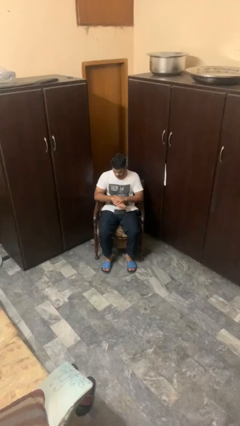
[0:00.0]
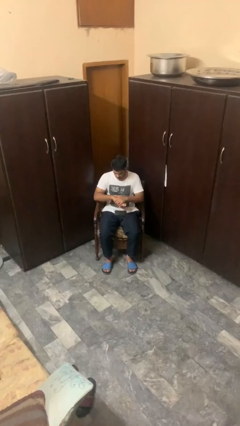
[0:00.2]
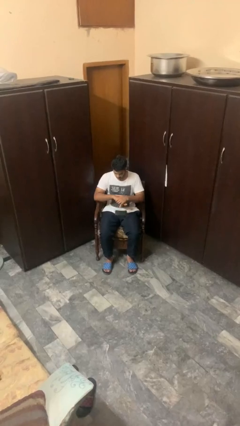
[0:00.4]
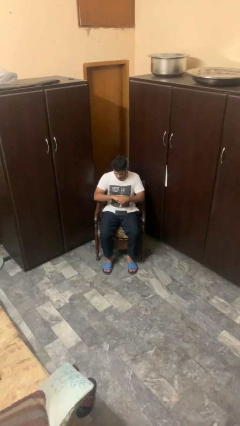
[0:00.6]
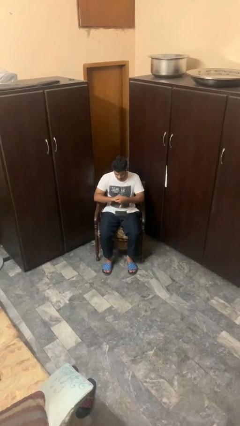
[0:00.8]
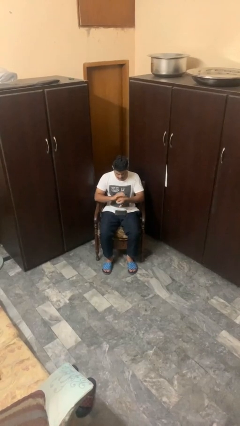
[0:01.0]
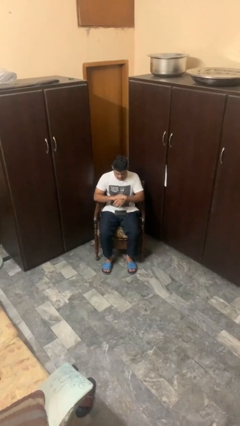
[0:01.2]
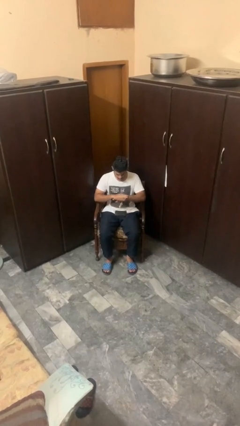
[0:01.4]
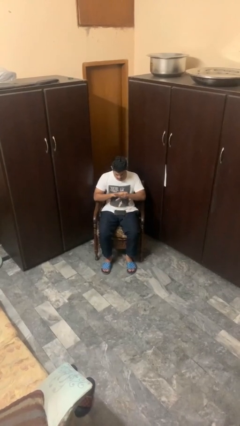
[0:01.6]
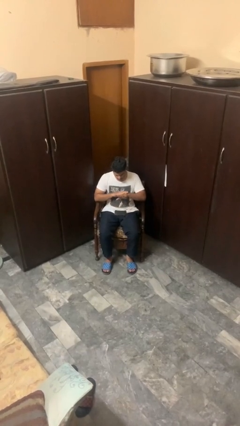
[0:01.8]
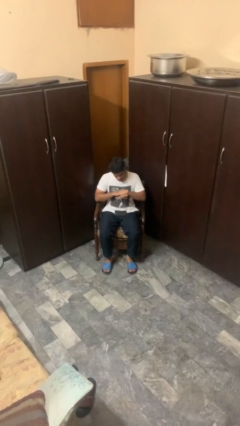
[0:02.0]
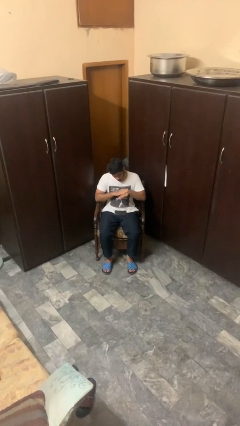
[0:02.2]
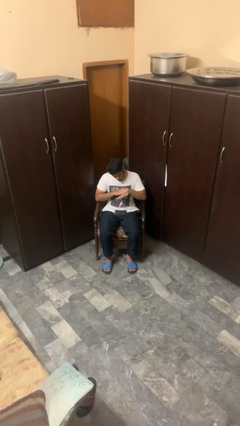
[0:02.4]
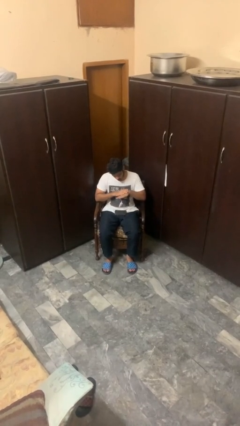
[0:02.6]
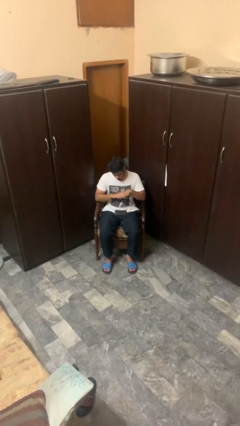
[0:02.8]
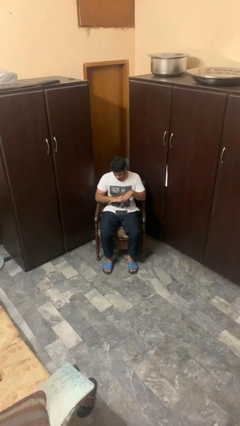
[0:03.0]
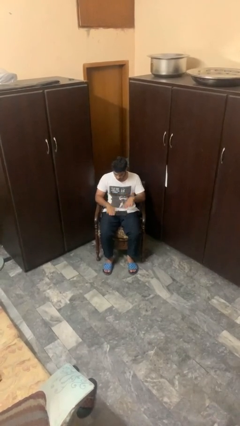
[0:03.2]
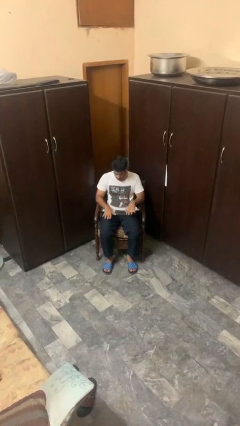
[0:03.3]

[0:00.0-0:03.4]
person looks at hands in lap

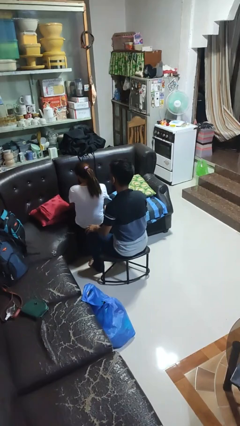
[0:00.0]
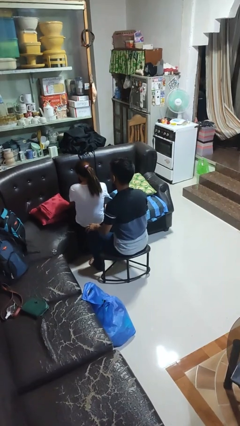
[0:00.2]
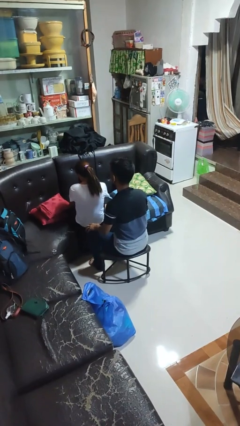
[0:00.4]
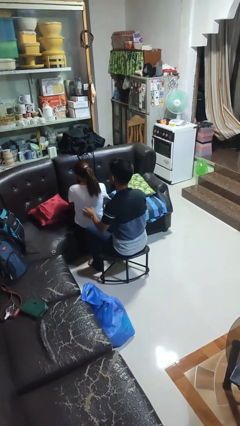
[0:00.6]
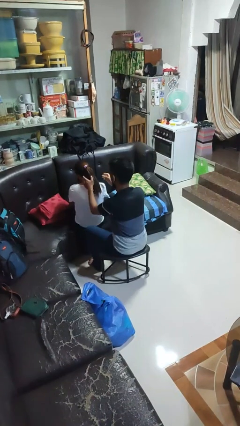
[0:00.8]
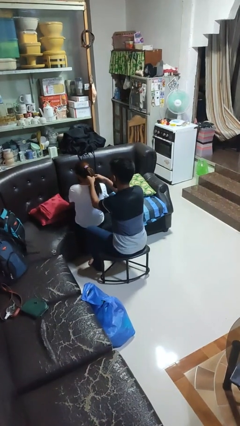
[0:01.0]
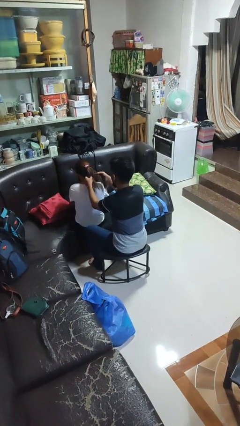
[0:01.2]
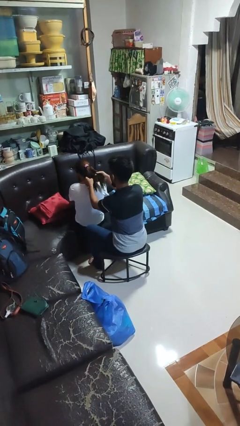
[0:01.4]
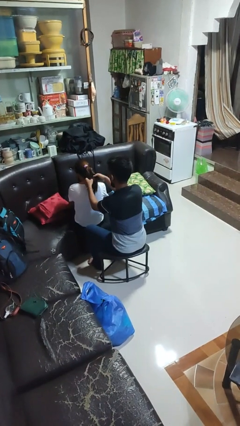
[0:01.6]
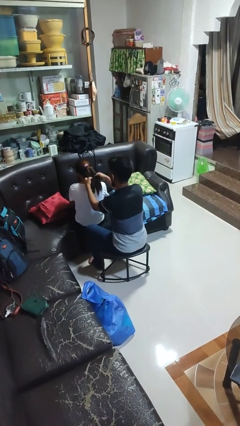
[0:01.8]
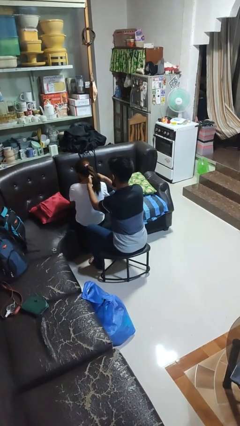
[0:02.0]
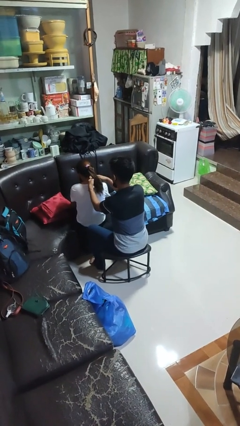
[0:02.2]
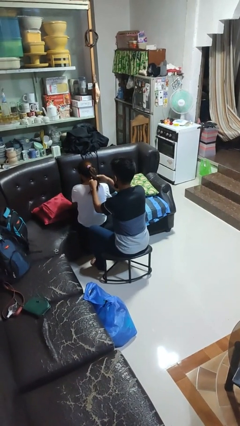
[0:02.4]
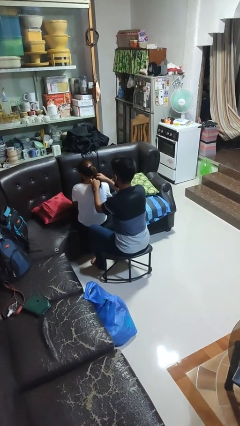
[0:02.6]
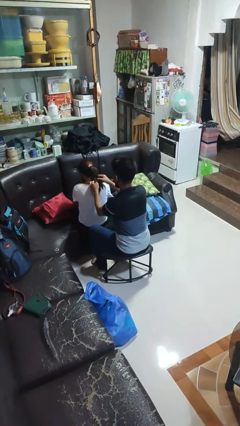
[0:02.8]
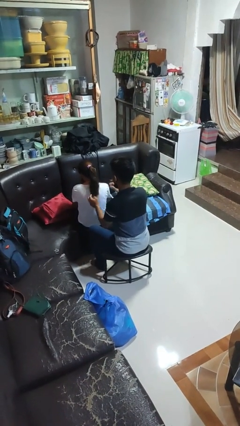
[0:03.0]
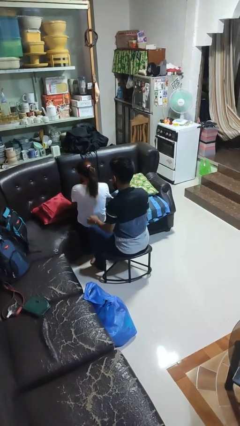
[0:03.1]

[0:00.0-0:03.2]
person braids hair of person

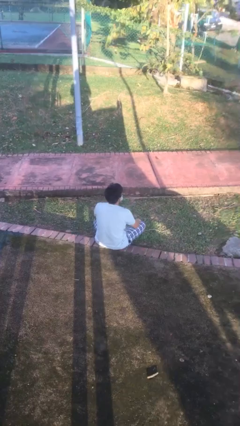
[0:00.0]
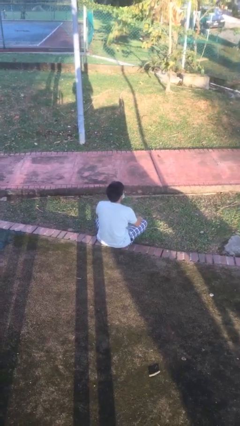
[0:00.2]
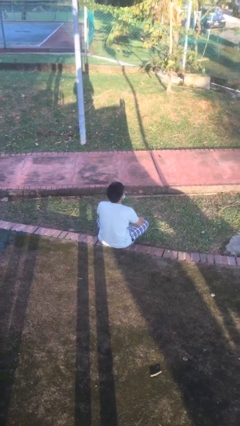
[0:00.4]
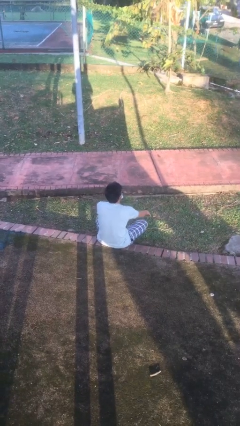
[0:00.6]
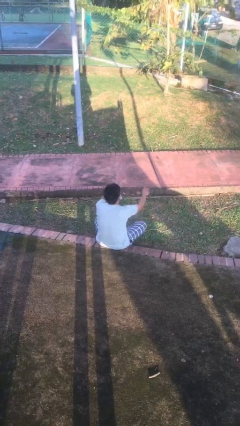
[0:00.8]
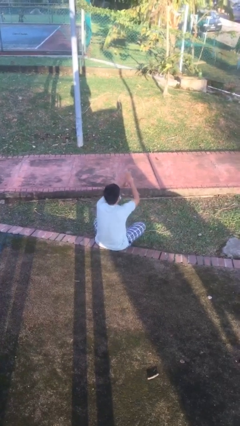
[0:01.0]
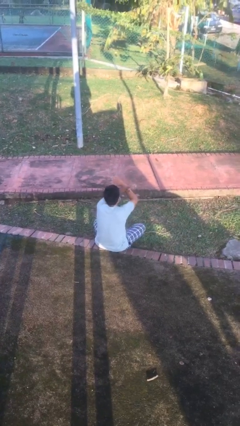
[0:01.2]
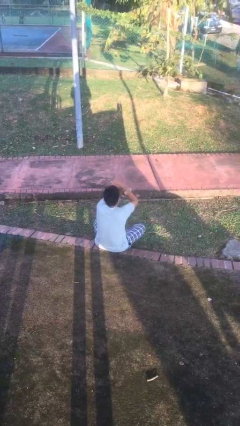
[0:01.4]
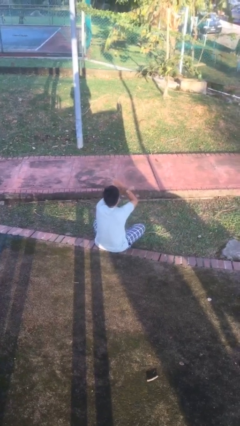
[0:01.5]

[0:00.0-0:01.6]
person gestures arms x

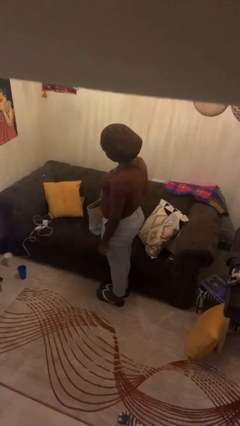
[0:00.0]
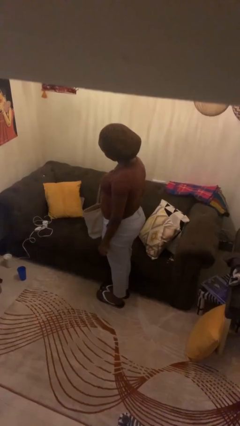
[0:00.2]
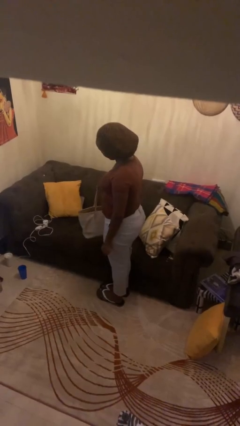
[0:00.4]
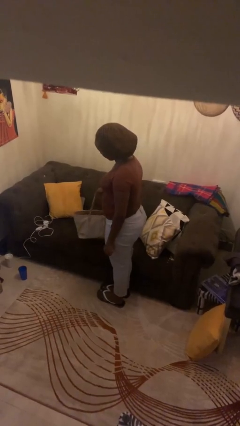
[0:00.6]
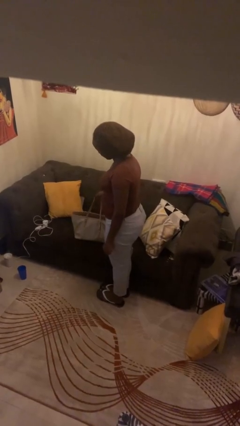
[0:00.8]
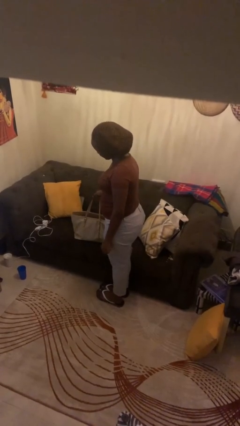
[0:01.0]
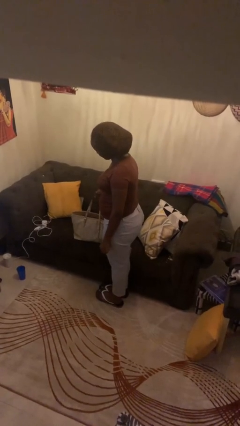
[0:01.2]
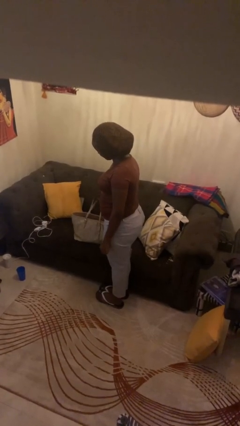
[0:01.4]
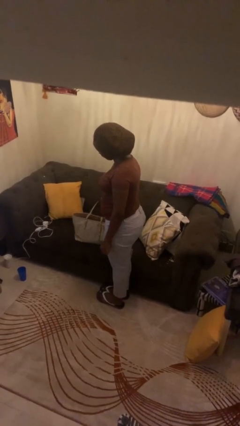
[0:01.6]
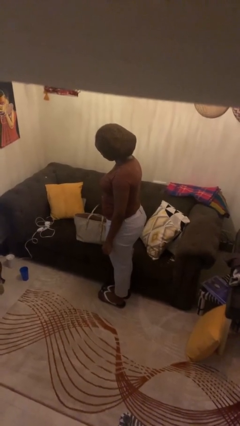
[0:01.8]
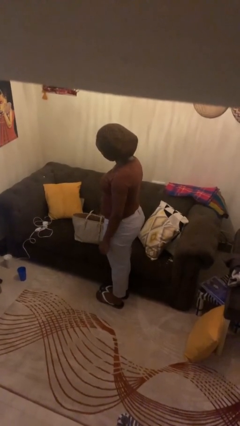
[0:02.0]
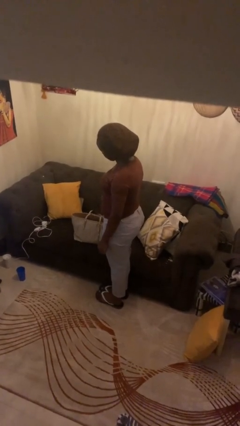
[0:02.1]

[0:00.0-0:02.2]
person puts down object on couch

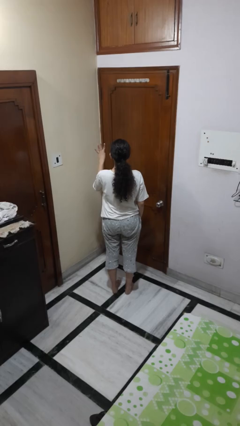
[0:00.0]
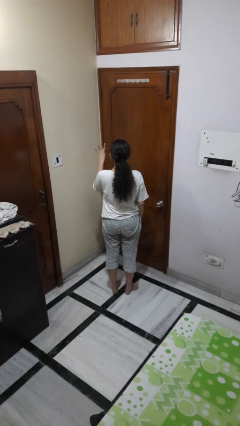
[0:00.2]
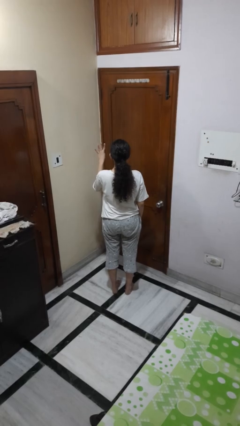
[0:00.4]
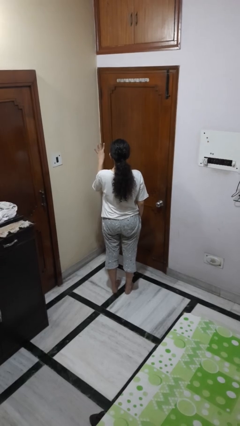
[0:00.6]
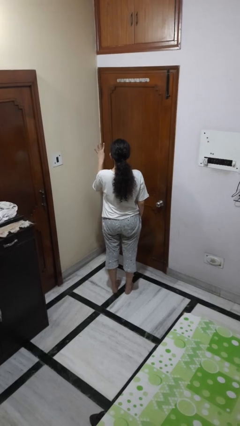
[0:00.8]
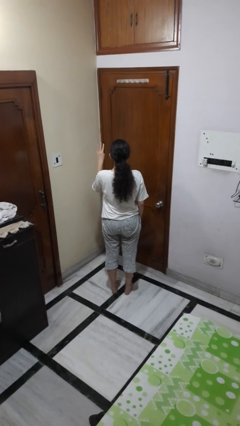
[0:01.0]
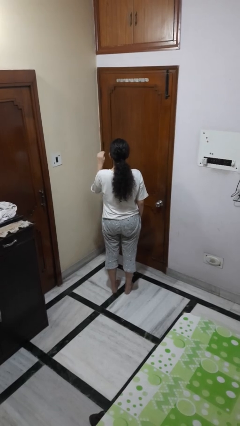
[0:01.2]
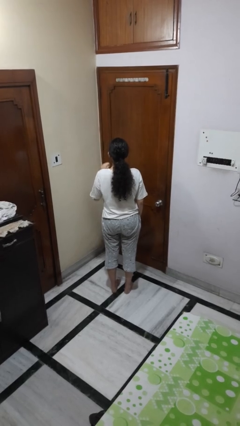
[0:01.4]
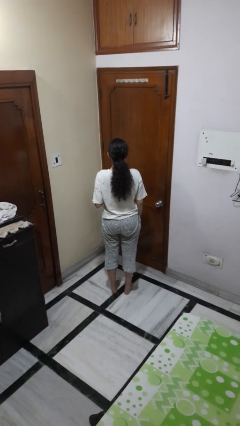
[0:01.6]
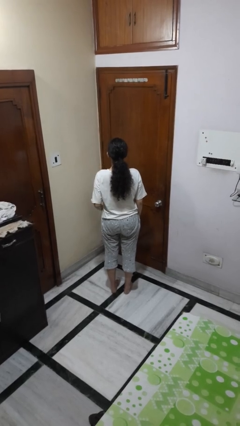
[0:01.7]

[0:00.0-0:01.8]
person gestures number four

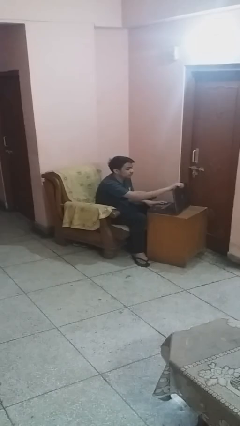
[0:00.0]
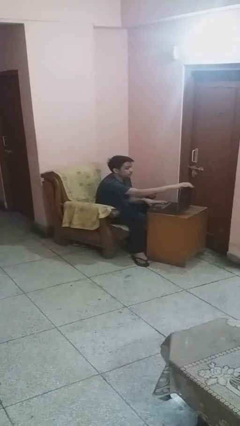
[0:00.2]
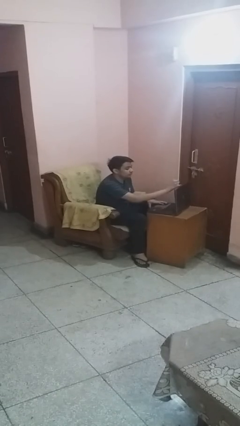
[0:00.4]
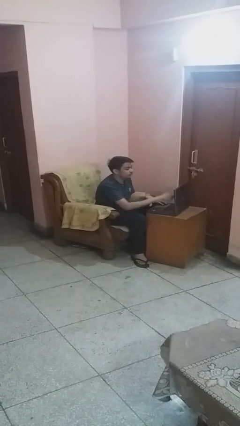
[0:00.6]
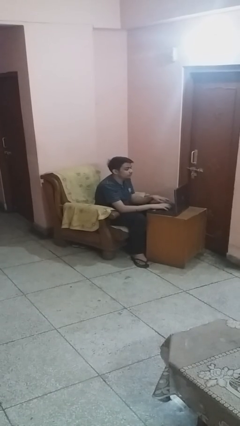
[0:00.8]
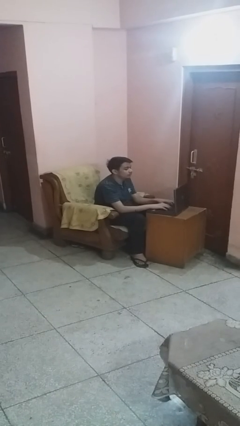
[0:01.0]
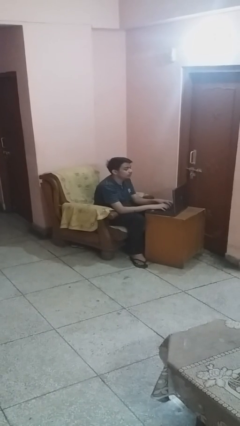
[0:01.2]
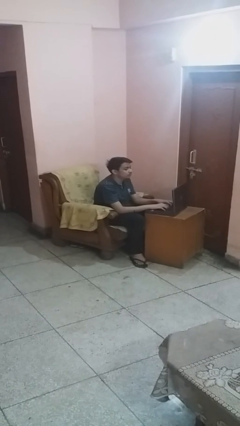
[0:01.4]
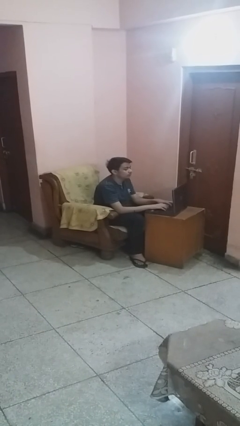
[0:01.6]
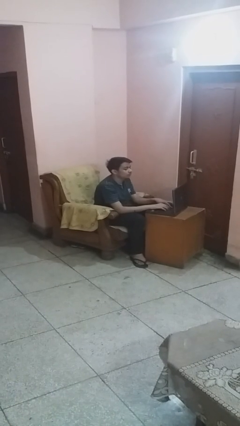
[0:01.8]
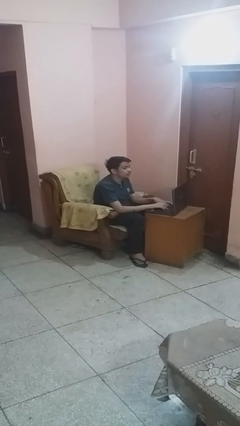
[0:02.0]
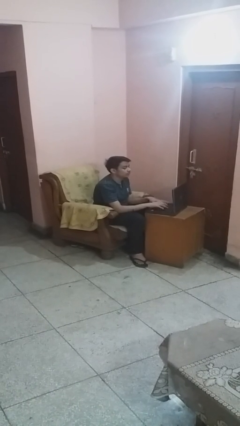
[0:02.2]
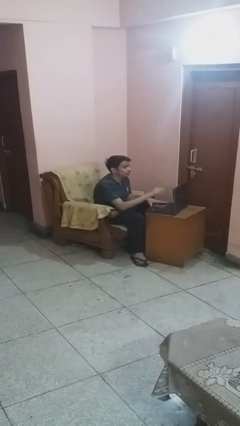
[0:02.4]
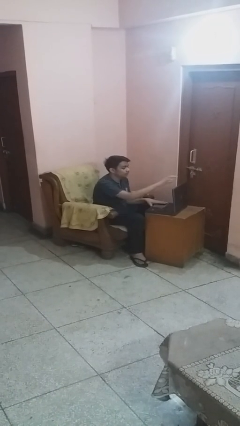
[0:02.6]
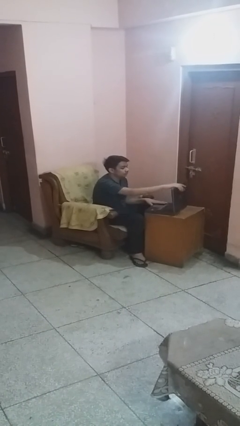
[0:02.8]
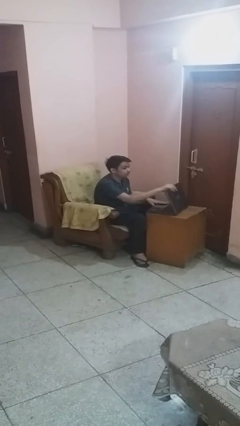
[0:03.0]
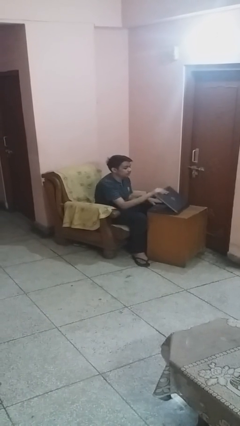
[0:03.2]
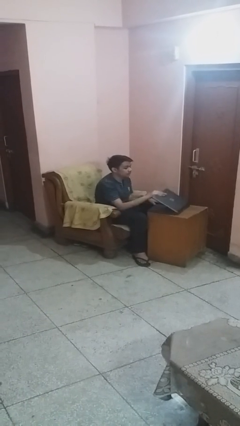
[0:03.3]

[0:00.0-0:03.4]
person interacts with laptop

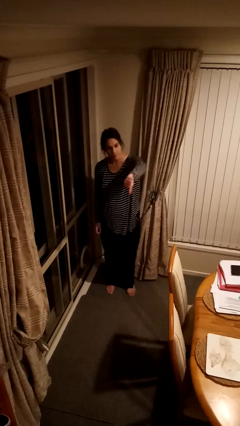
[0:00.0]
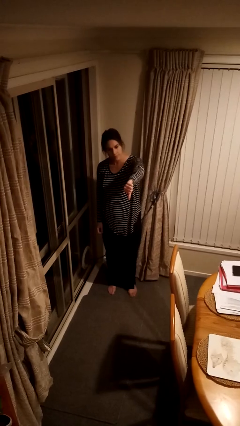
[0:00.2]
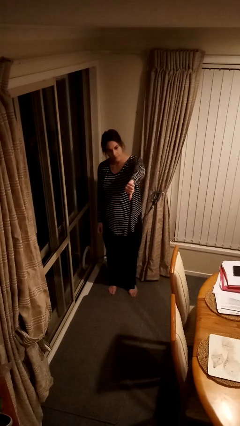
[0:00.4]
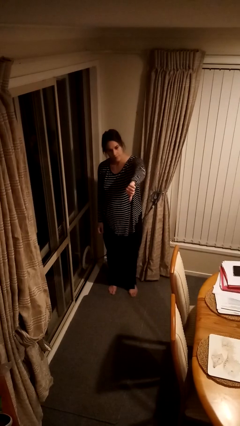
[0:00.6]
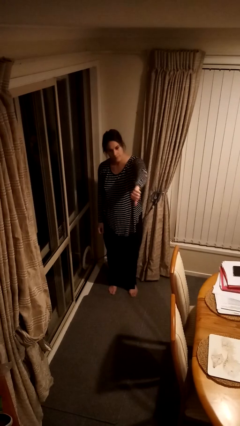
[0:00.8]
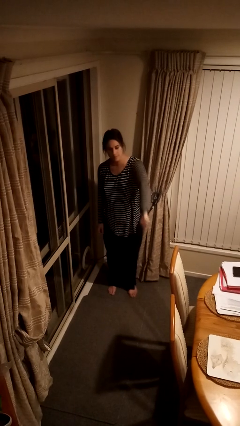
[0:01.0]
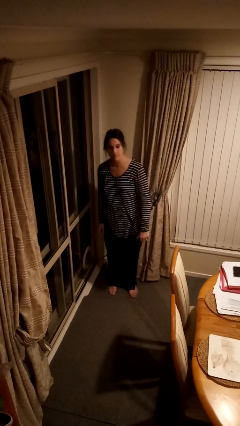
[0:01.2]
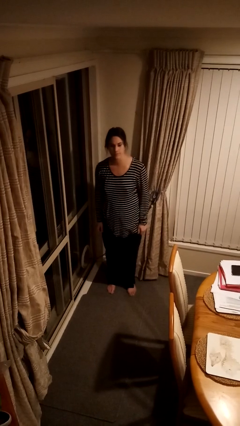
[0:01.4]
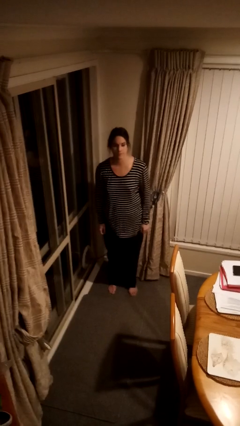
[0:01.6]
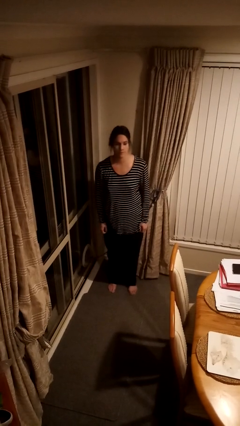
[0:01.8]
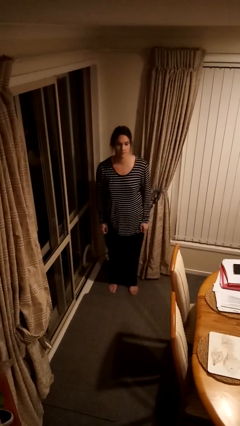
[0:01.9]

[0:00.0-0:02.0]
person gestures thumbs down
